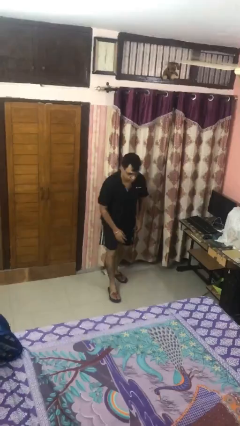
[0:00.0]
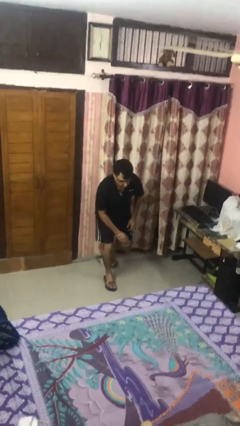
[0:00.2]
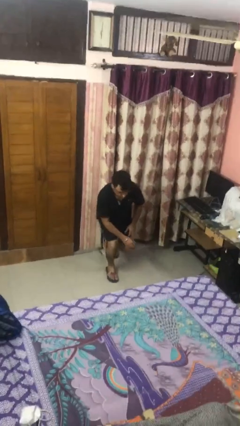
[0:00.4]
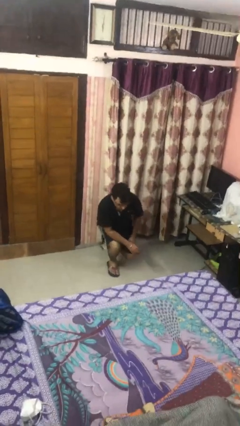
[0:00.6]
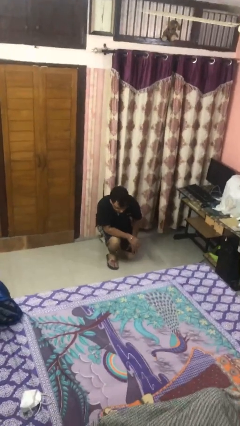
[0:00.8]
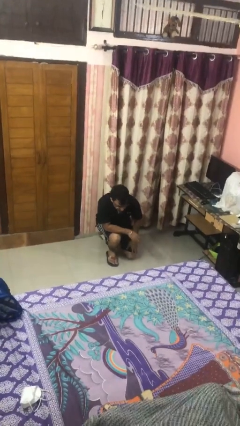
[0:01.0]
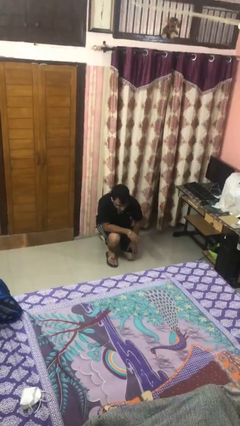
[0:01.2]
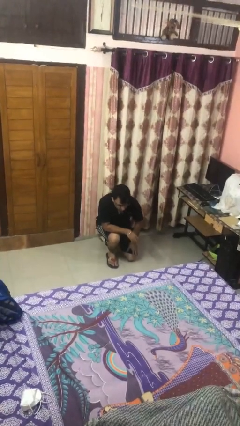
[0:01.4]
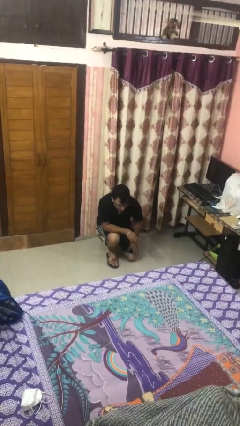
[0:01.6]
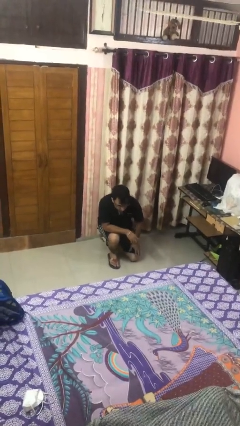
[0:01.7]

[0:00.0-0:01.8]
person kneels

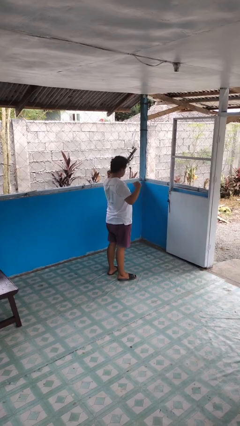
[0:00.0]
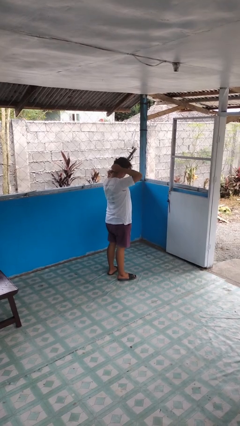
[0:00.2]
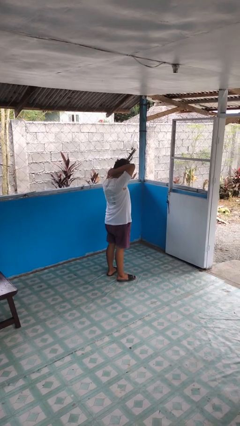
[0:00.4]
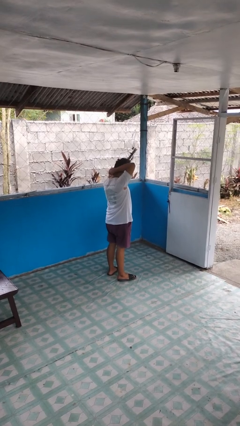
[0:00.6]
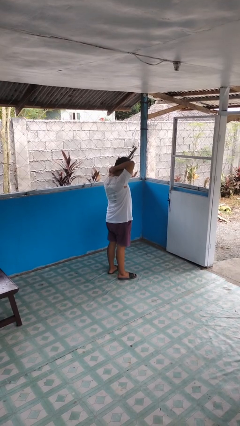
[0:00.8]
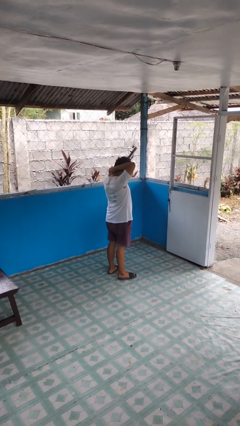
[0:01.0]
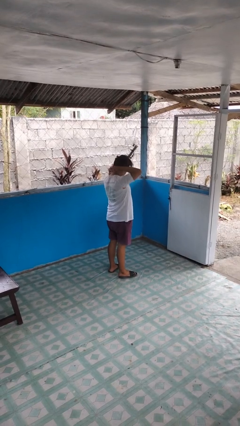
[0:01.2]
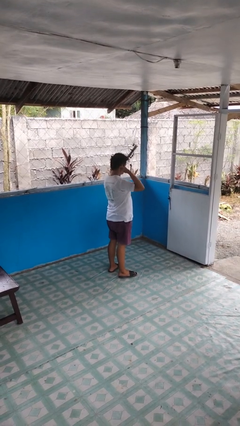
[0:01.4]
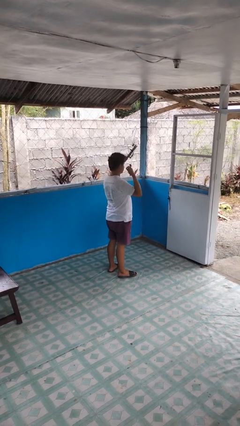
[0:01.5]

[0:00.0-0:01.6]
person takes off necklace

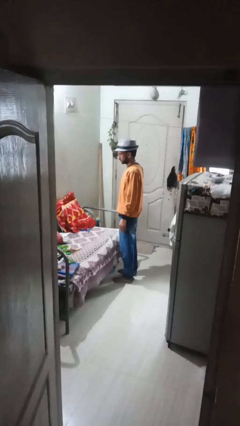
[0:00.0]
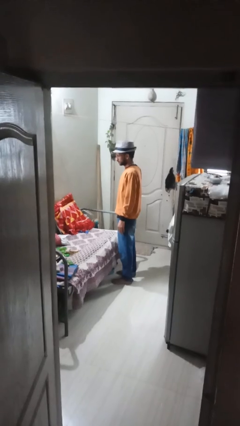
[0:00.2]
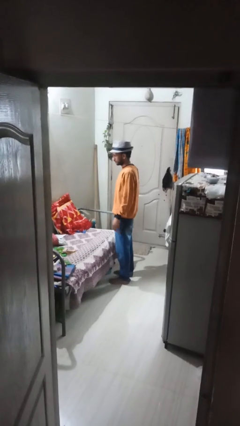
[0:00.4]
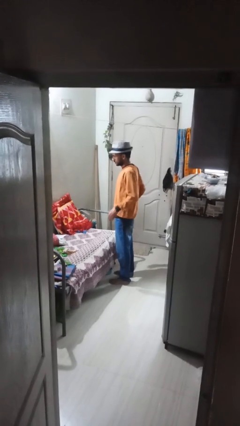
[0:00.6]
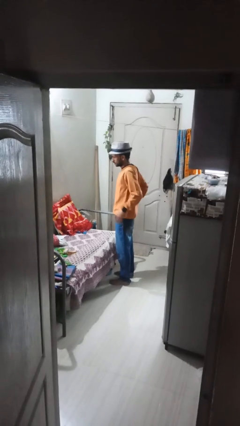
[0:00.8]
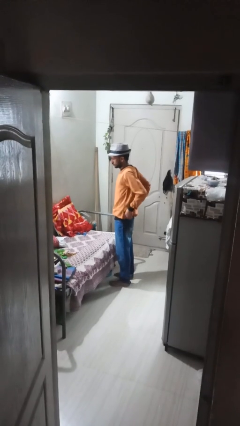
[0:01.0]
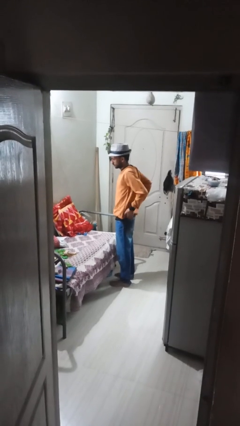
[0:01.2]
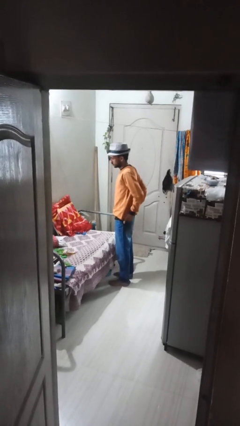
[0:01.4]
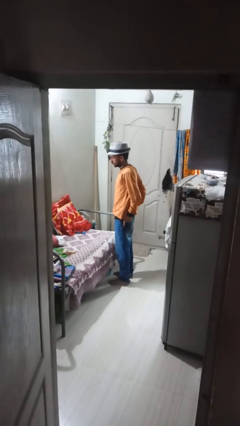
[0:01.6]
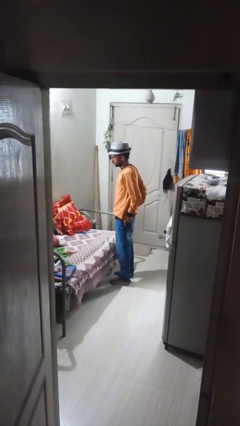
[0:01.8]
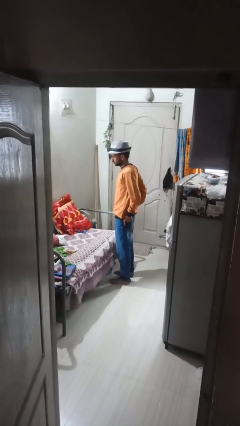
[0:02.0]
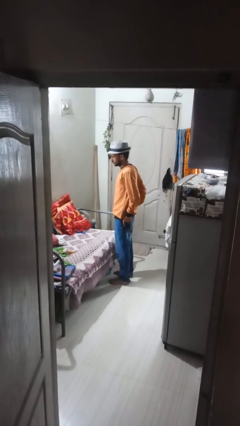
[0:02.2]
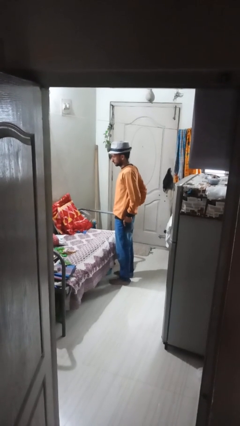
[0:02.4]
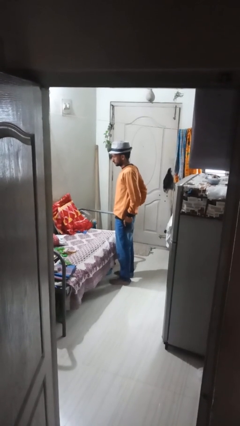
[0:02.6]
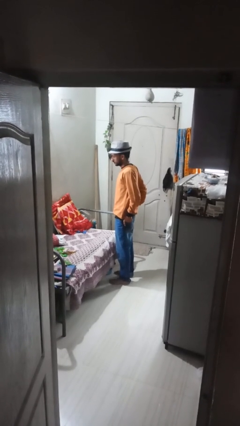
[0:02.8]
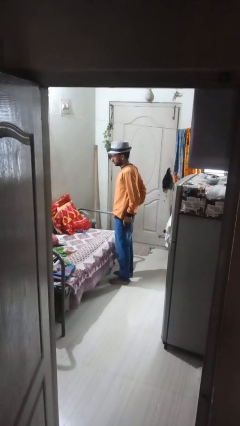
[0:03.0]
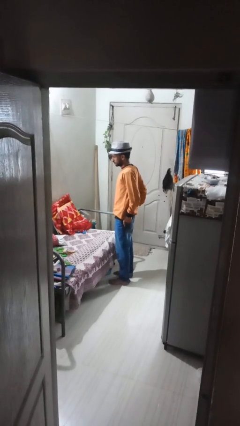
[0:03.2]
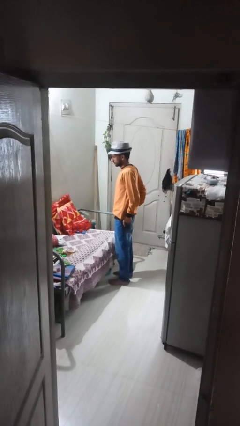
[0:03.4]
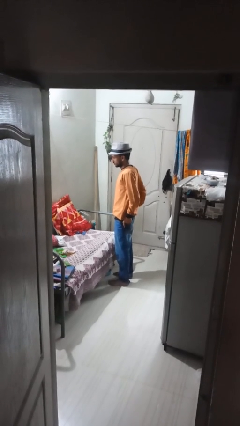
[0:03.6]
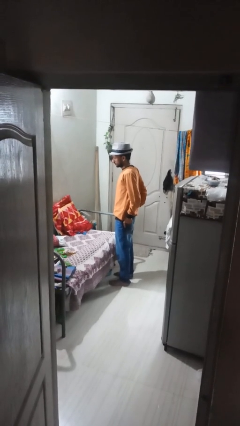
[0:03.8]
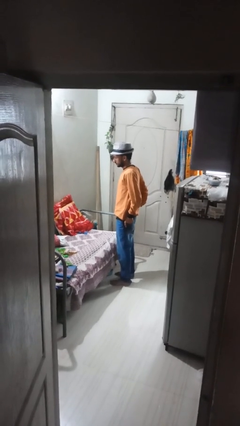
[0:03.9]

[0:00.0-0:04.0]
person puts hands in back pockets

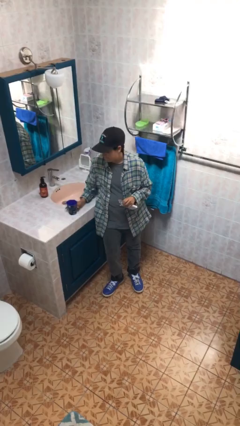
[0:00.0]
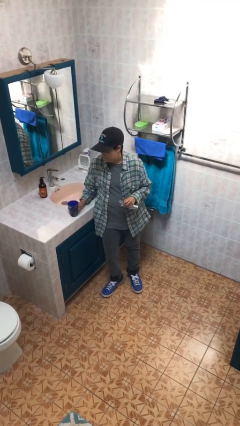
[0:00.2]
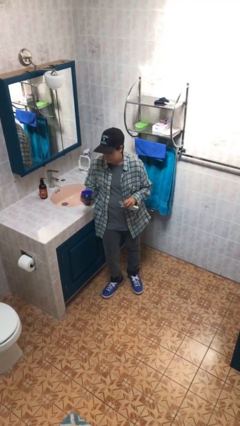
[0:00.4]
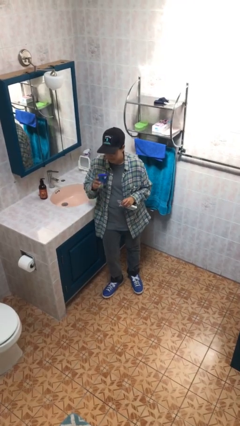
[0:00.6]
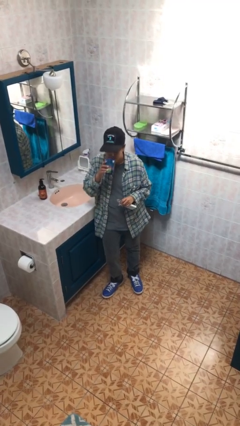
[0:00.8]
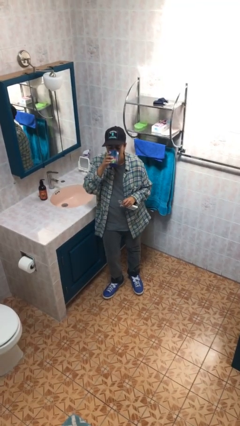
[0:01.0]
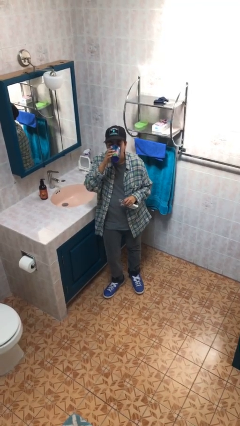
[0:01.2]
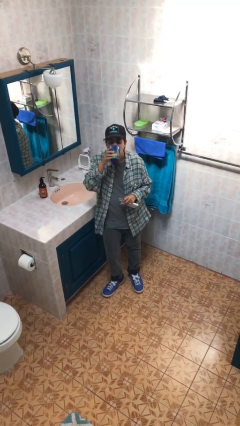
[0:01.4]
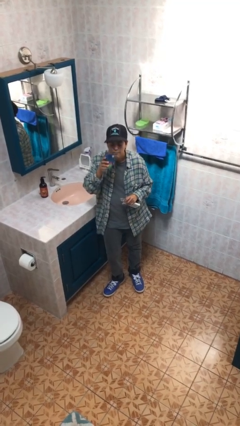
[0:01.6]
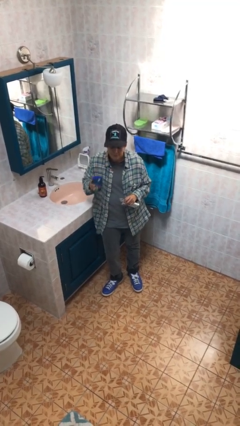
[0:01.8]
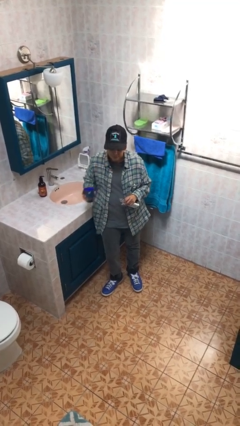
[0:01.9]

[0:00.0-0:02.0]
person drinks from cup

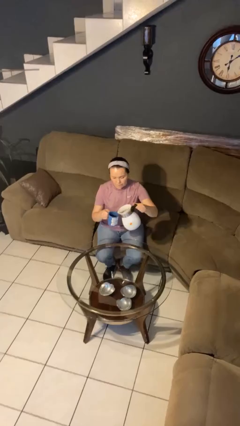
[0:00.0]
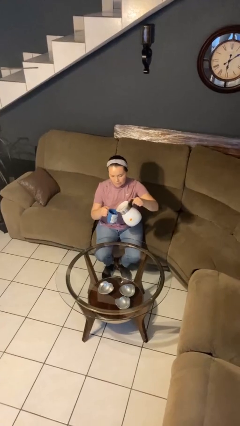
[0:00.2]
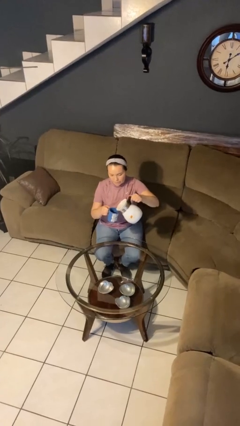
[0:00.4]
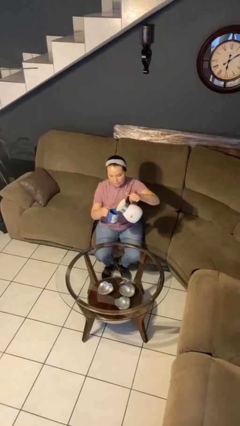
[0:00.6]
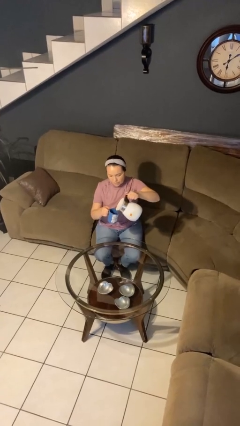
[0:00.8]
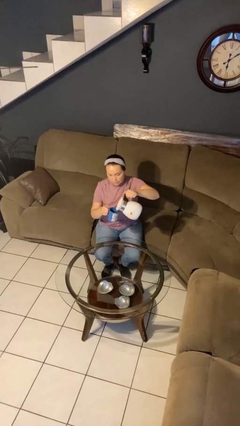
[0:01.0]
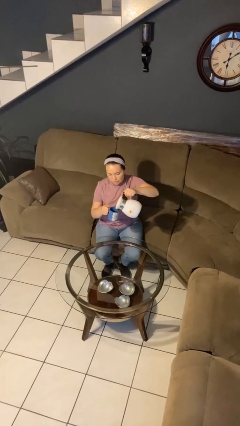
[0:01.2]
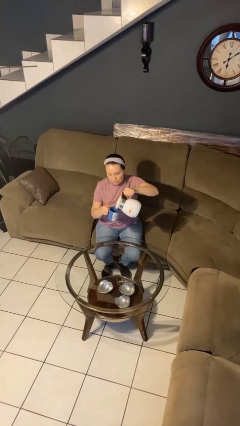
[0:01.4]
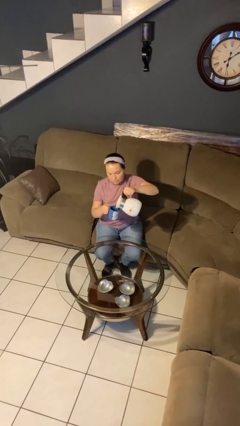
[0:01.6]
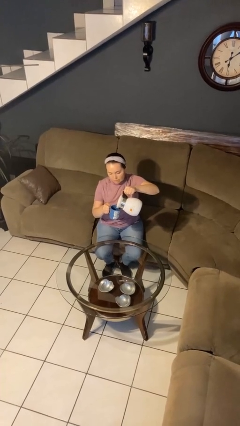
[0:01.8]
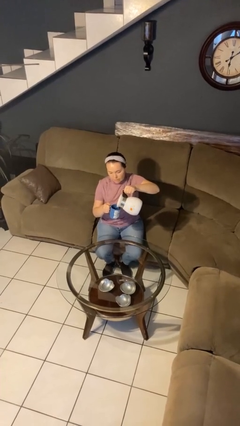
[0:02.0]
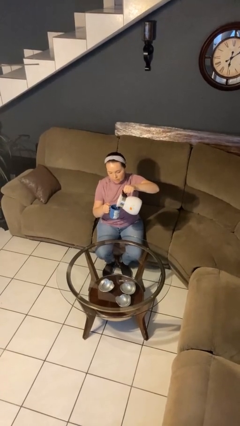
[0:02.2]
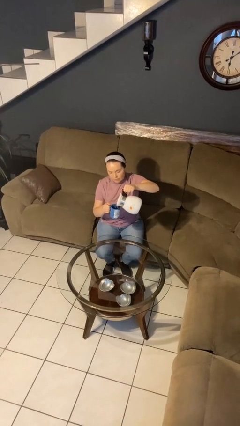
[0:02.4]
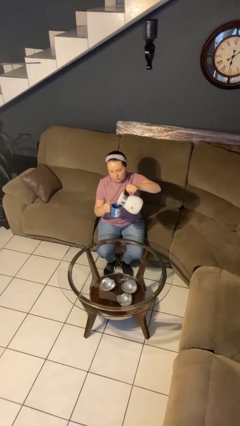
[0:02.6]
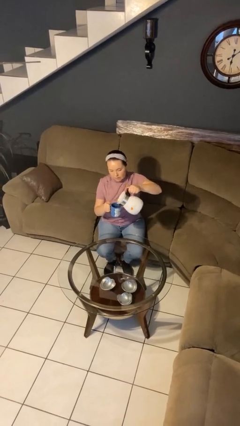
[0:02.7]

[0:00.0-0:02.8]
person pours coffee into mug

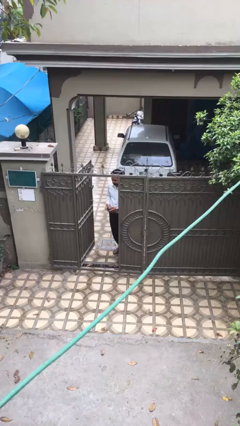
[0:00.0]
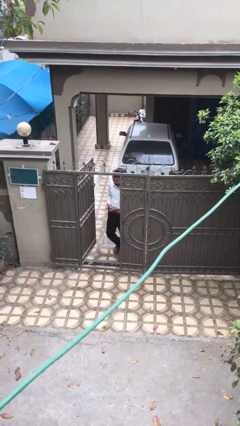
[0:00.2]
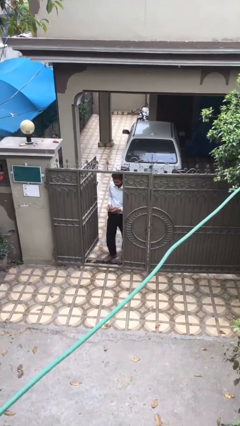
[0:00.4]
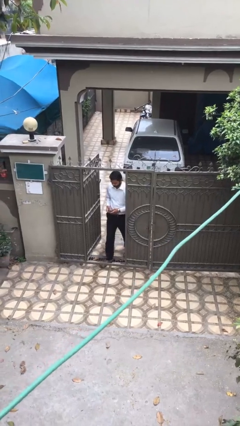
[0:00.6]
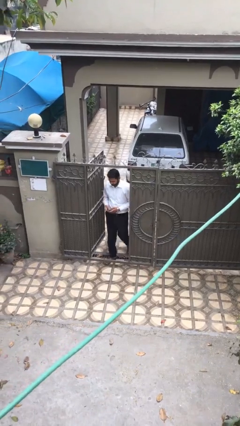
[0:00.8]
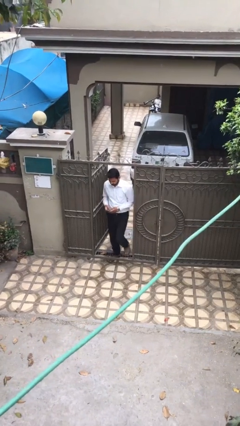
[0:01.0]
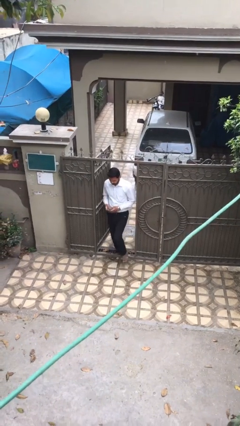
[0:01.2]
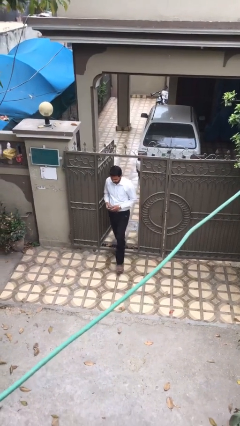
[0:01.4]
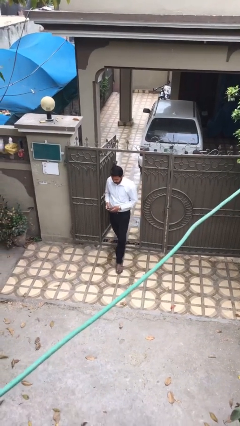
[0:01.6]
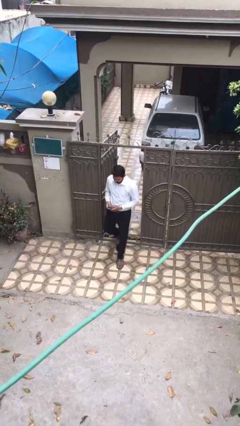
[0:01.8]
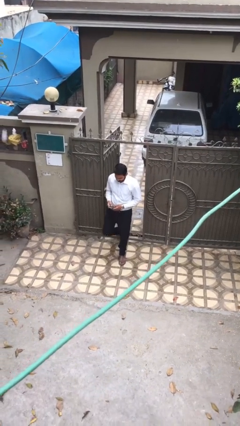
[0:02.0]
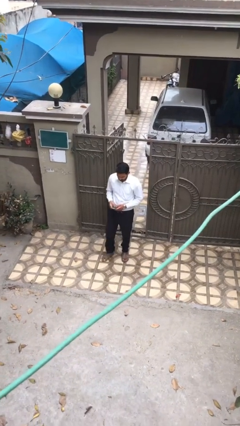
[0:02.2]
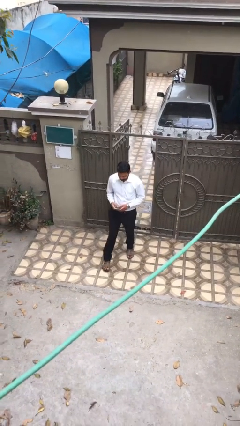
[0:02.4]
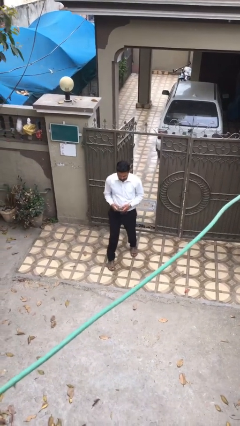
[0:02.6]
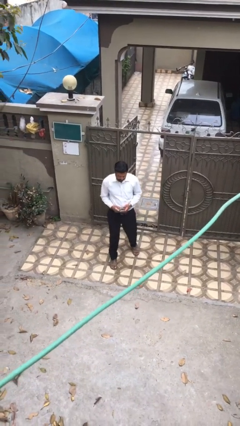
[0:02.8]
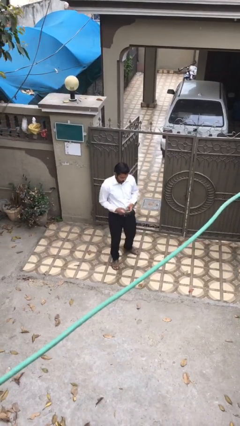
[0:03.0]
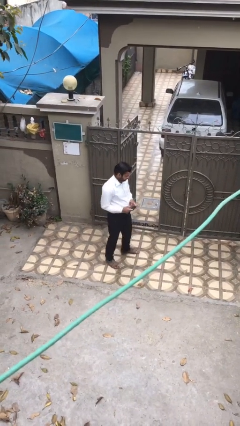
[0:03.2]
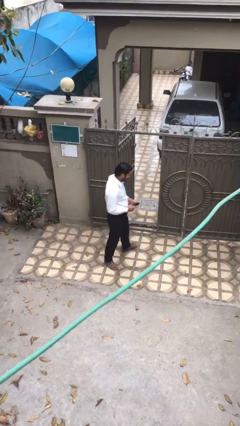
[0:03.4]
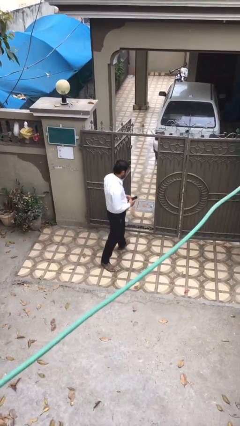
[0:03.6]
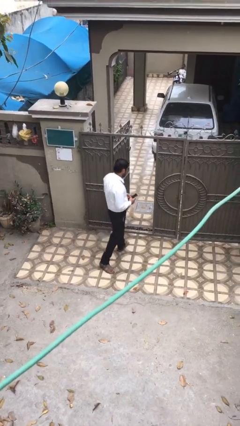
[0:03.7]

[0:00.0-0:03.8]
person enters scene through structure

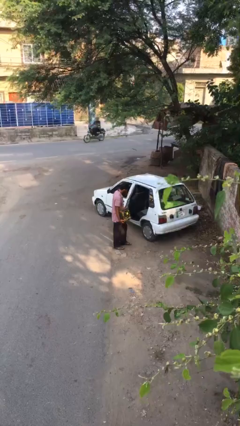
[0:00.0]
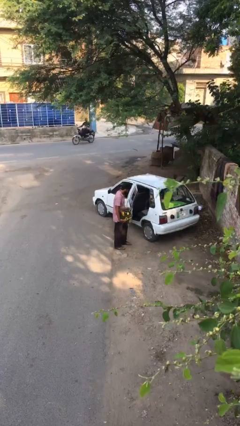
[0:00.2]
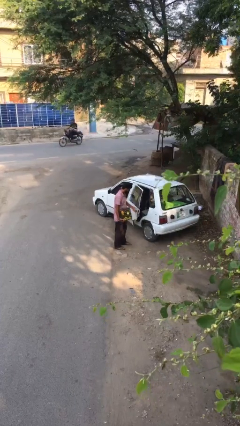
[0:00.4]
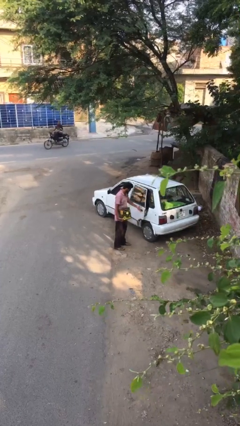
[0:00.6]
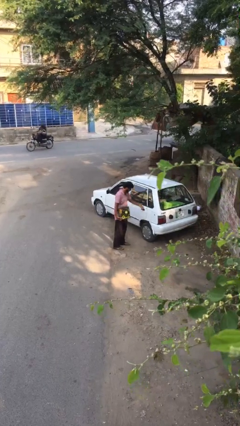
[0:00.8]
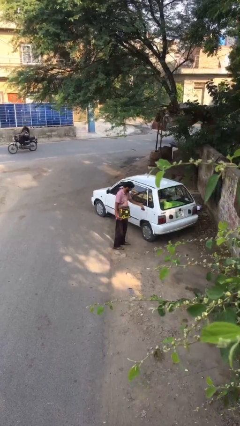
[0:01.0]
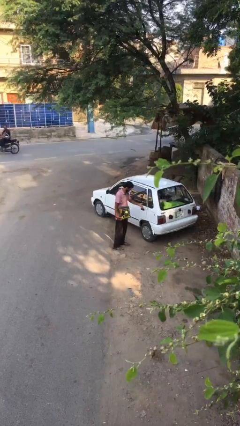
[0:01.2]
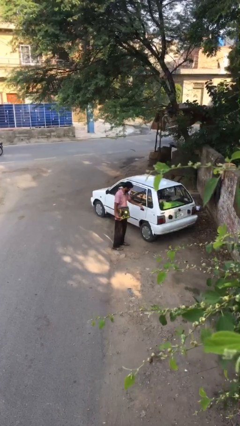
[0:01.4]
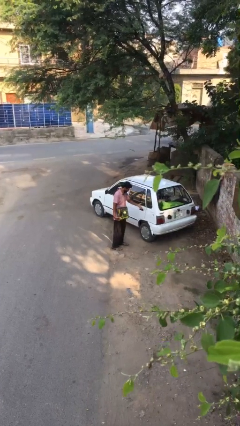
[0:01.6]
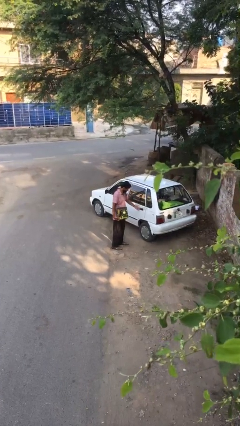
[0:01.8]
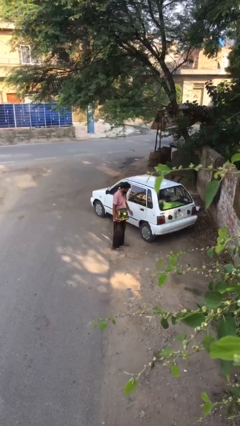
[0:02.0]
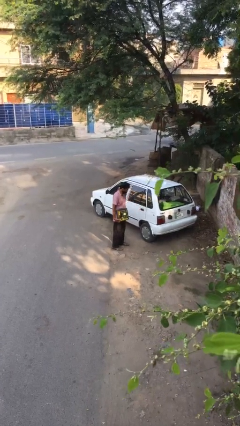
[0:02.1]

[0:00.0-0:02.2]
person closes car door
